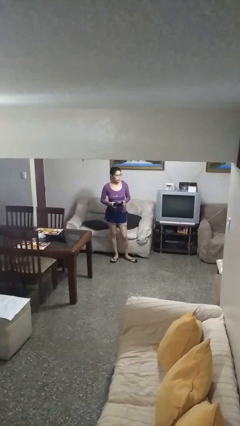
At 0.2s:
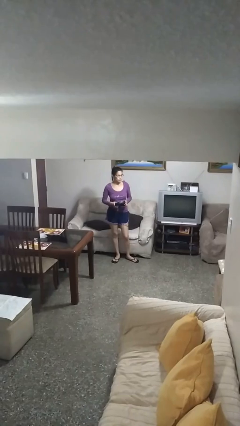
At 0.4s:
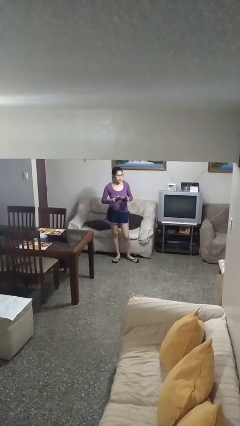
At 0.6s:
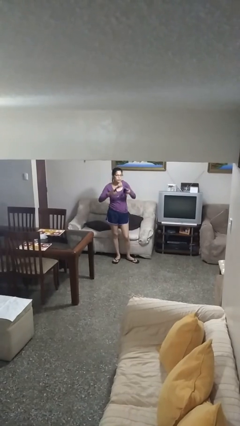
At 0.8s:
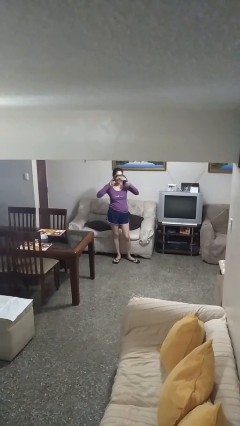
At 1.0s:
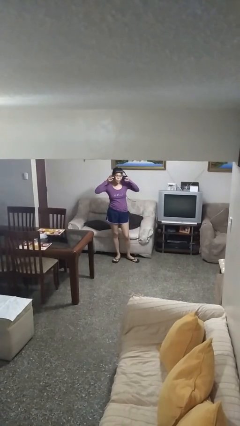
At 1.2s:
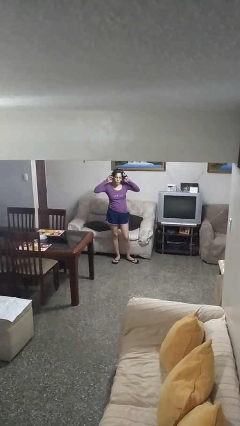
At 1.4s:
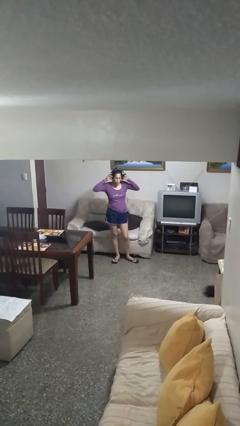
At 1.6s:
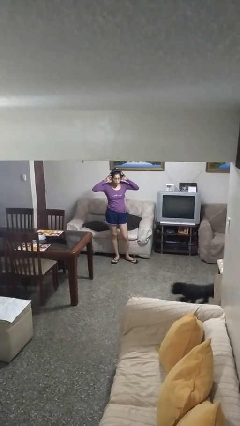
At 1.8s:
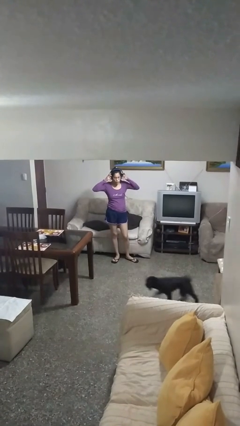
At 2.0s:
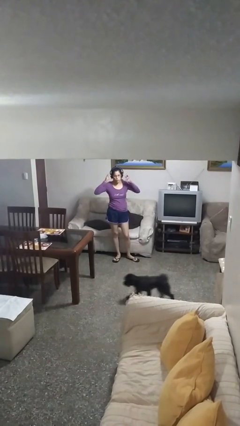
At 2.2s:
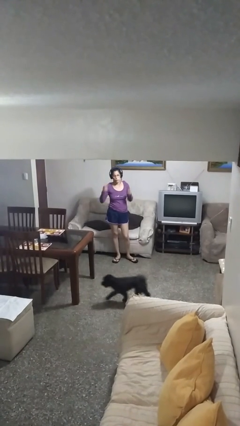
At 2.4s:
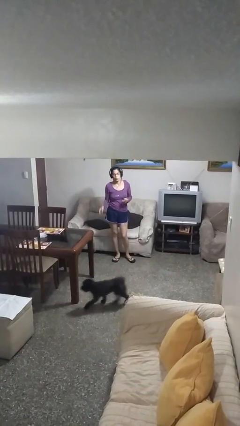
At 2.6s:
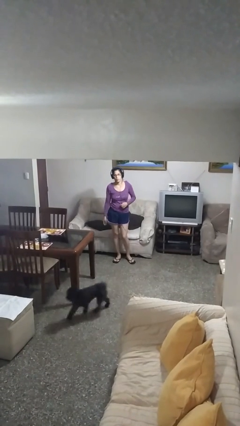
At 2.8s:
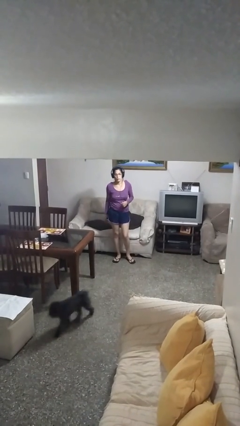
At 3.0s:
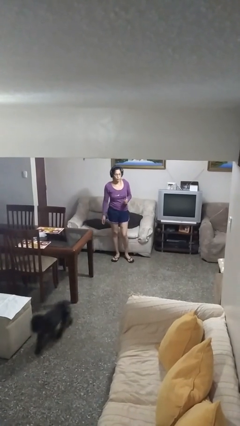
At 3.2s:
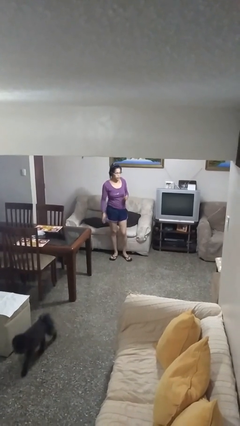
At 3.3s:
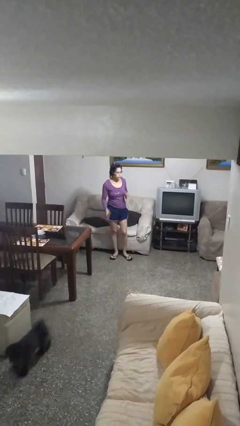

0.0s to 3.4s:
person puts on headphones

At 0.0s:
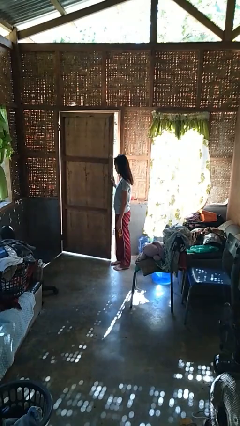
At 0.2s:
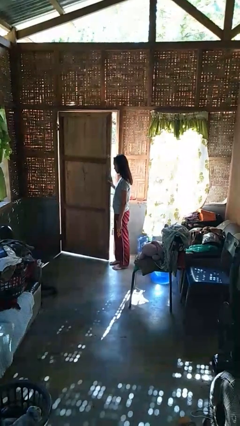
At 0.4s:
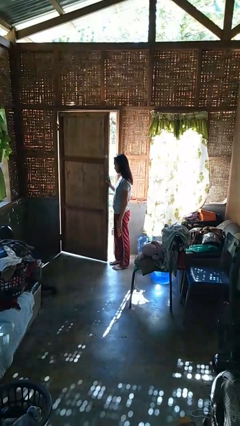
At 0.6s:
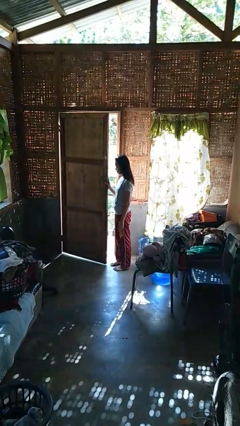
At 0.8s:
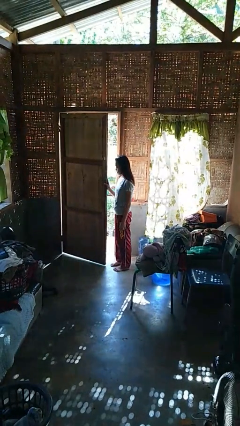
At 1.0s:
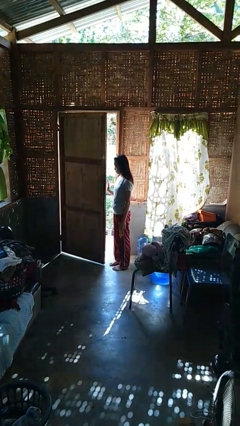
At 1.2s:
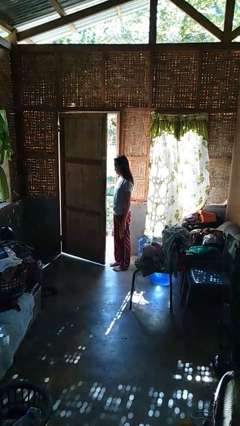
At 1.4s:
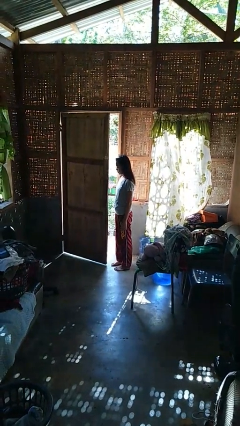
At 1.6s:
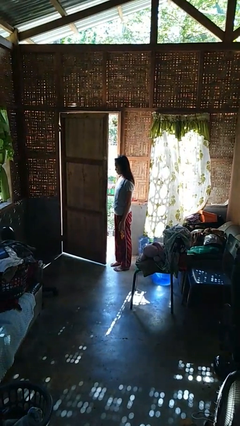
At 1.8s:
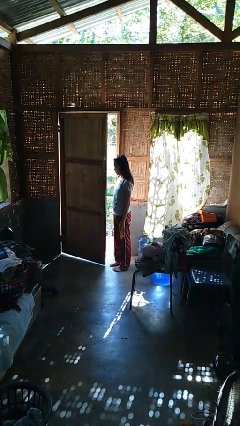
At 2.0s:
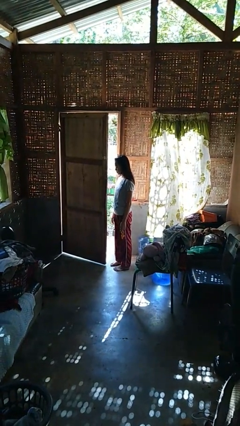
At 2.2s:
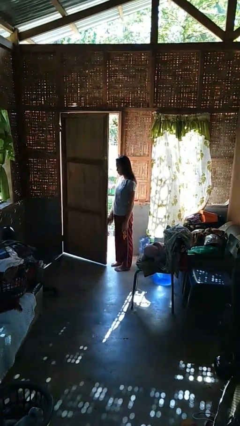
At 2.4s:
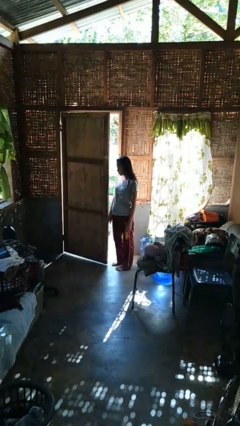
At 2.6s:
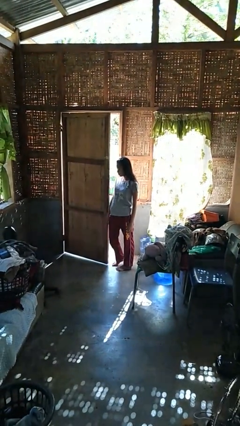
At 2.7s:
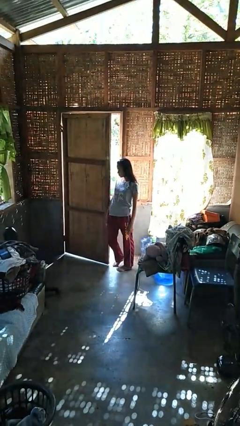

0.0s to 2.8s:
person opens facility door

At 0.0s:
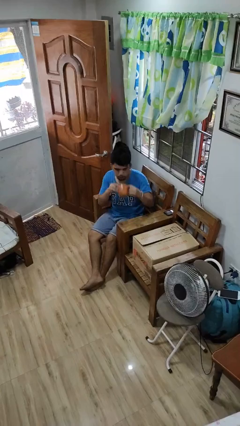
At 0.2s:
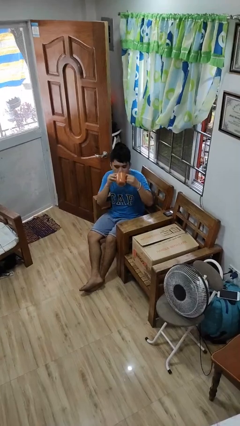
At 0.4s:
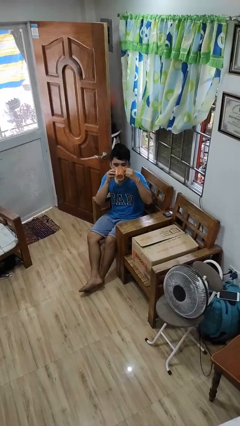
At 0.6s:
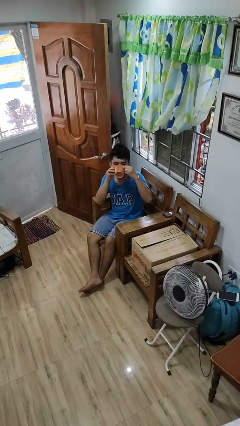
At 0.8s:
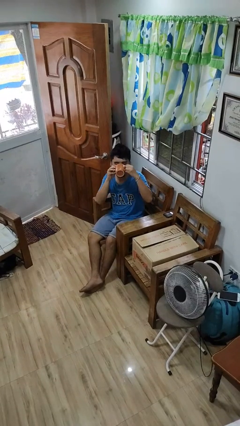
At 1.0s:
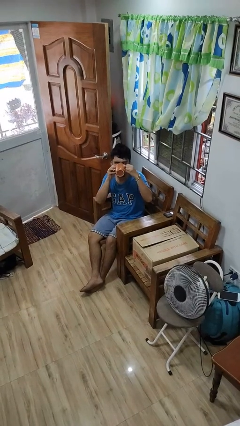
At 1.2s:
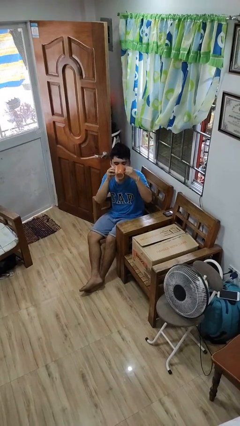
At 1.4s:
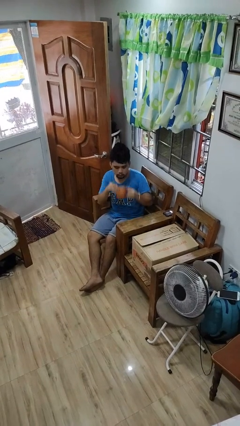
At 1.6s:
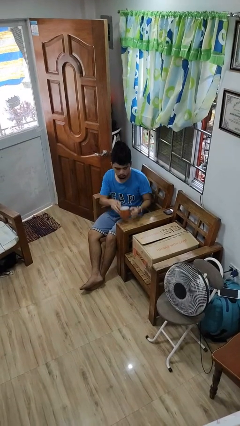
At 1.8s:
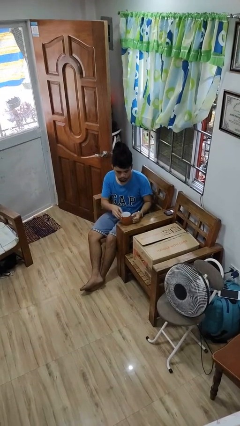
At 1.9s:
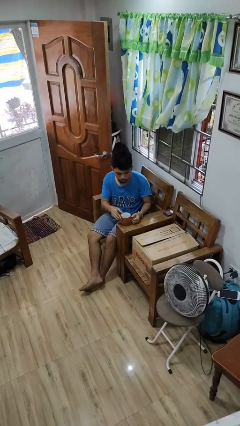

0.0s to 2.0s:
person drinks from mug

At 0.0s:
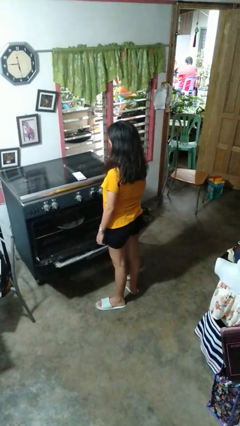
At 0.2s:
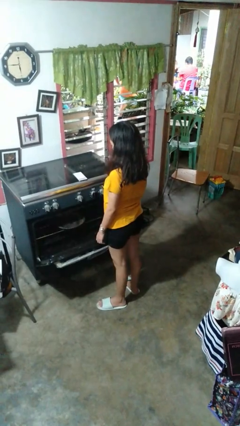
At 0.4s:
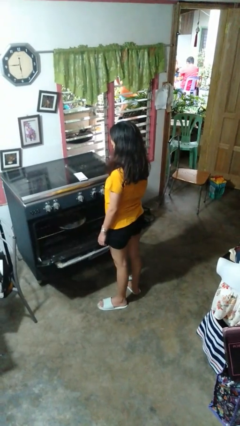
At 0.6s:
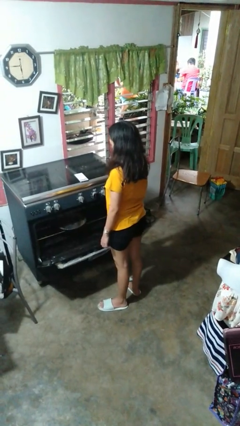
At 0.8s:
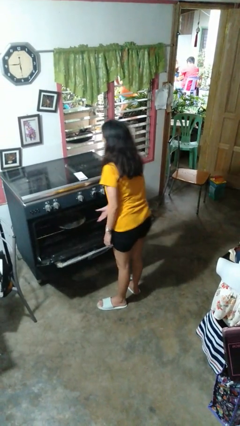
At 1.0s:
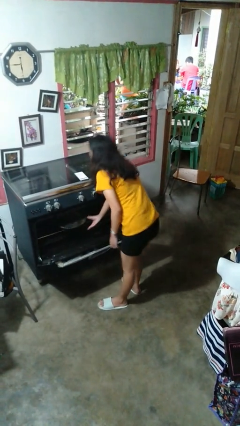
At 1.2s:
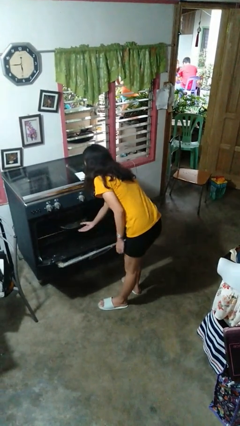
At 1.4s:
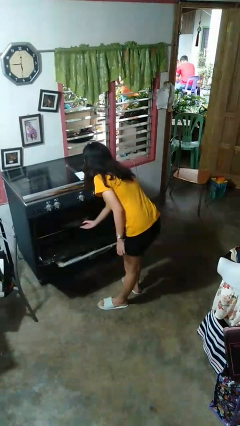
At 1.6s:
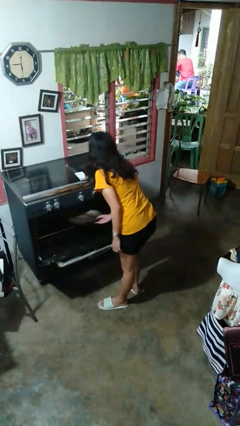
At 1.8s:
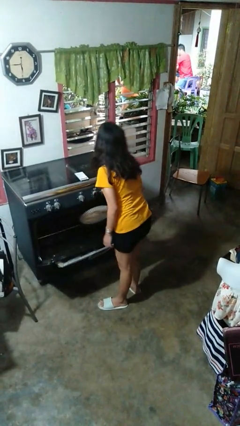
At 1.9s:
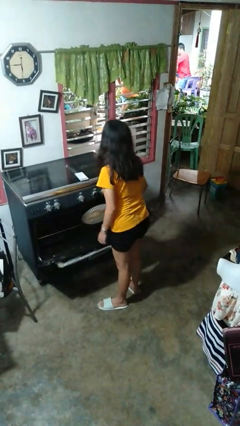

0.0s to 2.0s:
person takes object from oven

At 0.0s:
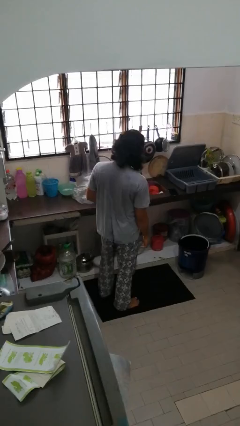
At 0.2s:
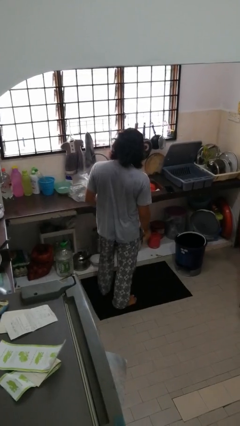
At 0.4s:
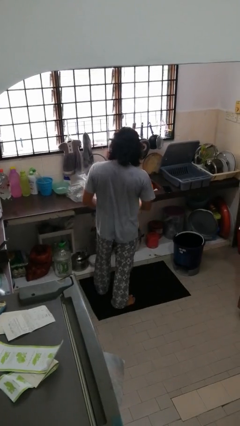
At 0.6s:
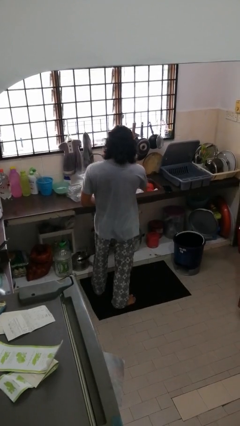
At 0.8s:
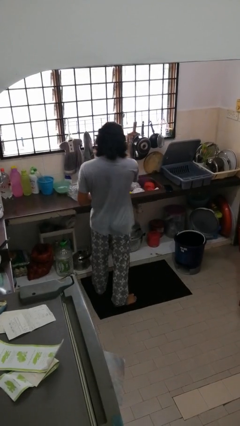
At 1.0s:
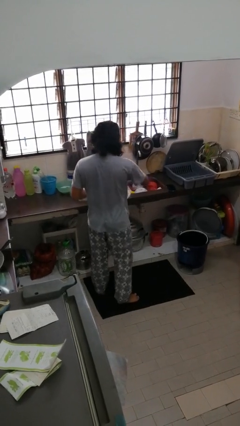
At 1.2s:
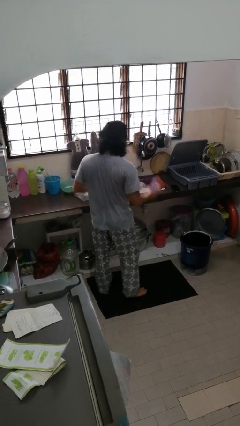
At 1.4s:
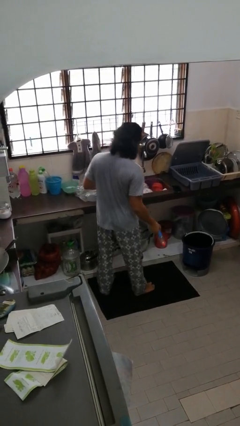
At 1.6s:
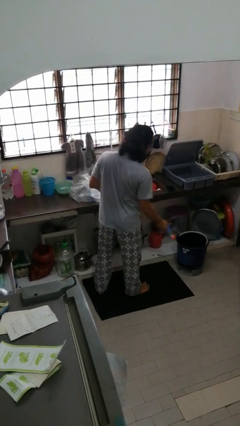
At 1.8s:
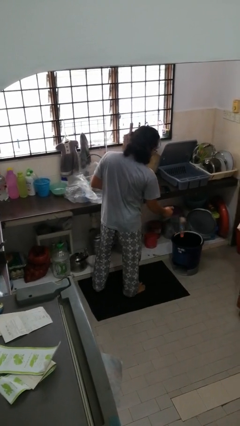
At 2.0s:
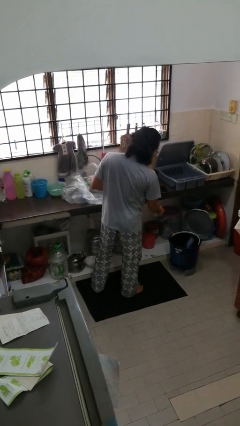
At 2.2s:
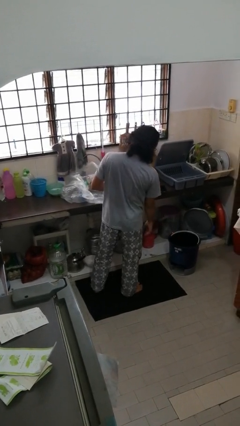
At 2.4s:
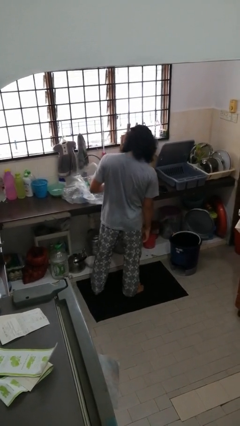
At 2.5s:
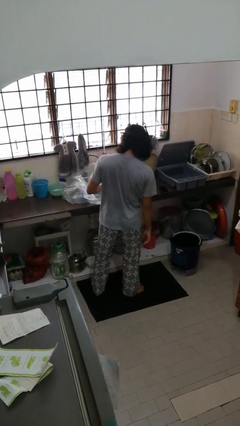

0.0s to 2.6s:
person discards trash

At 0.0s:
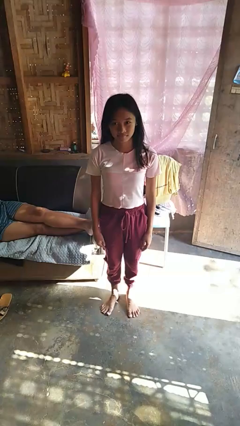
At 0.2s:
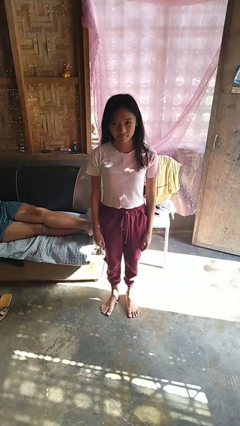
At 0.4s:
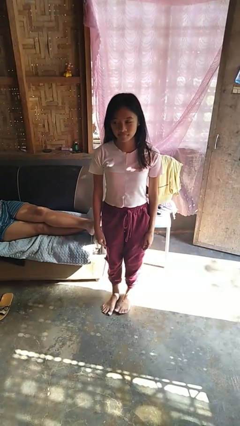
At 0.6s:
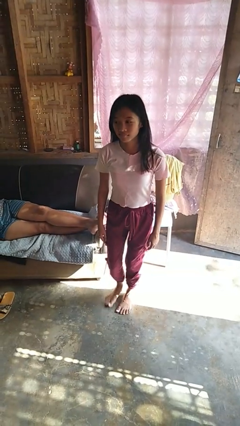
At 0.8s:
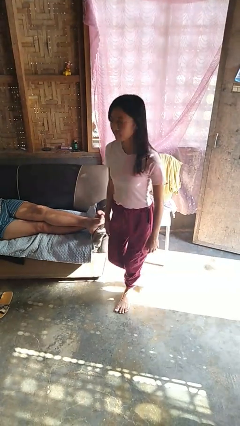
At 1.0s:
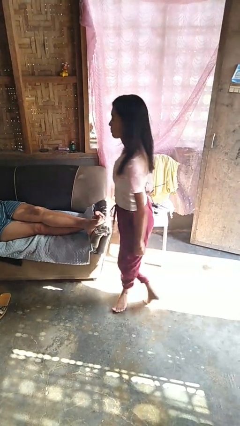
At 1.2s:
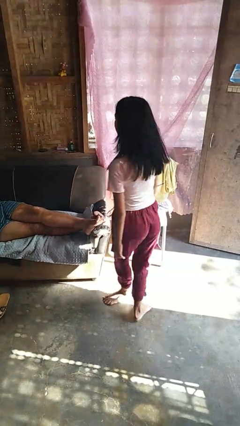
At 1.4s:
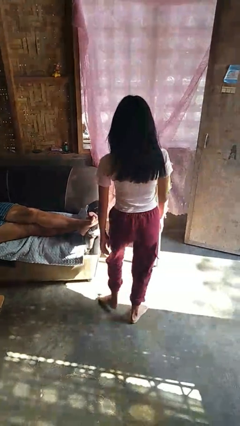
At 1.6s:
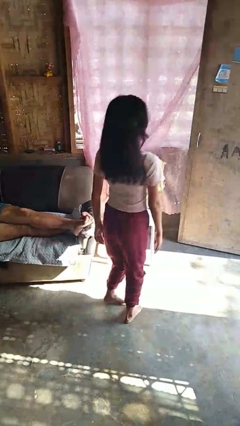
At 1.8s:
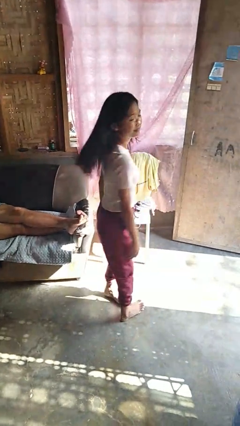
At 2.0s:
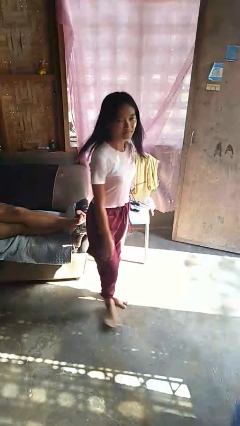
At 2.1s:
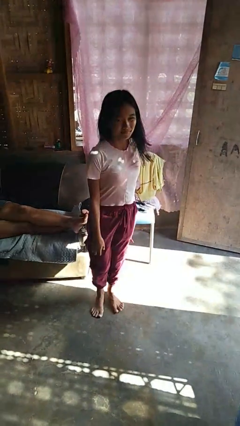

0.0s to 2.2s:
person twirls

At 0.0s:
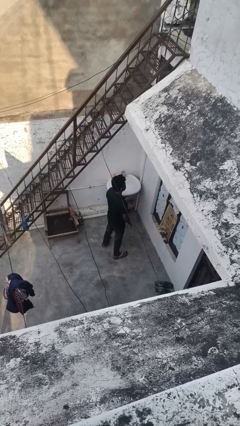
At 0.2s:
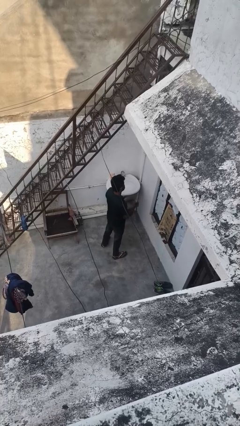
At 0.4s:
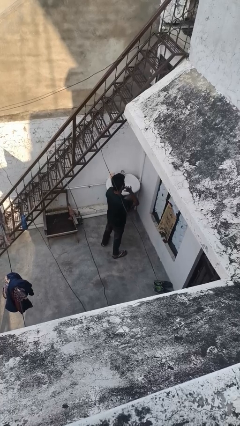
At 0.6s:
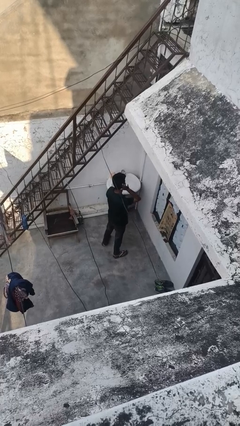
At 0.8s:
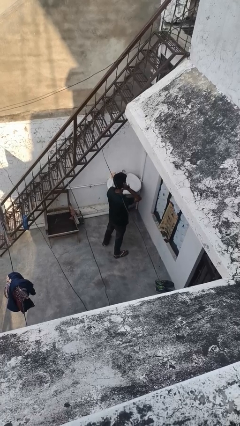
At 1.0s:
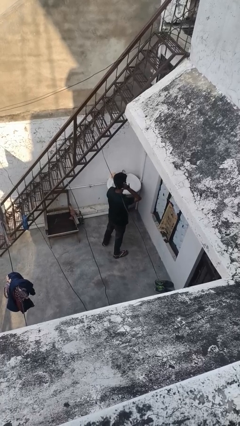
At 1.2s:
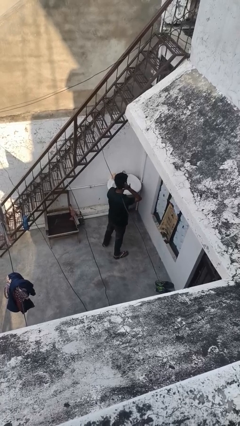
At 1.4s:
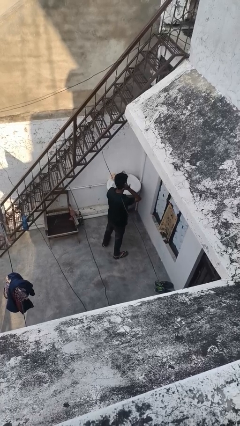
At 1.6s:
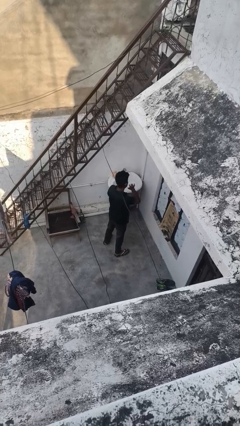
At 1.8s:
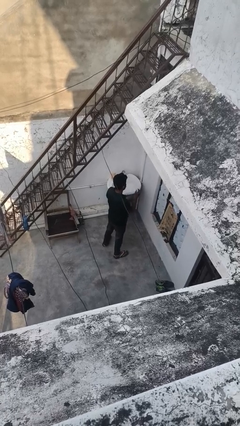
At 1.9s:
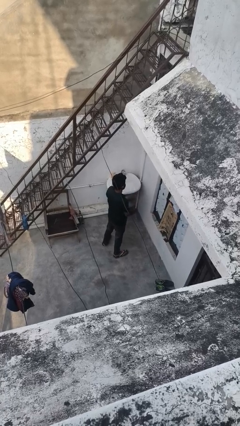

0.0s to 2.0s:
person gestures listen closely

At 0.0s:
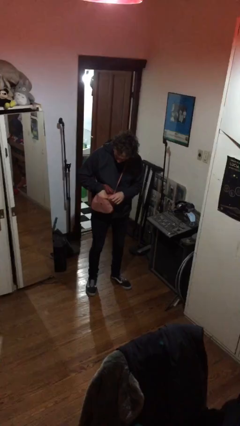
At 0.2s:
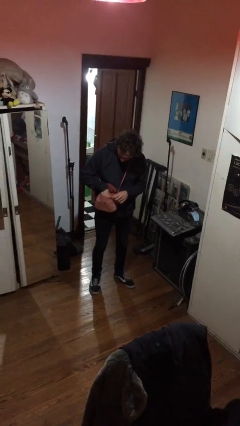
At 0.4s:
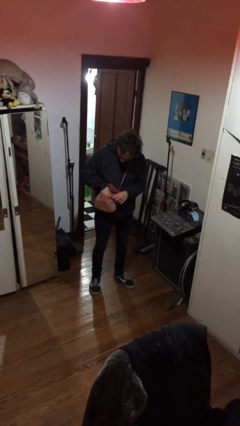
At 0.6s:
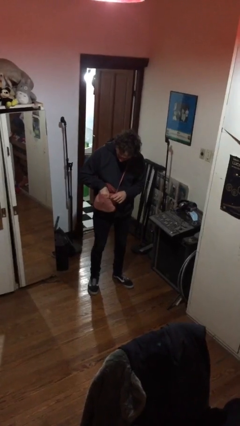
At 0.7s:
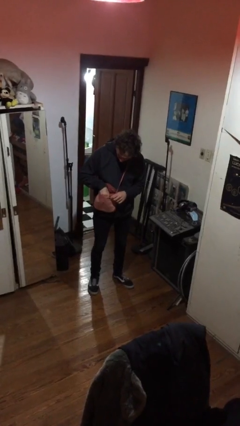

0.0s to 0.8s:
person searches in purse
